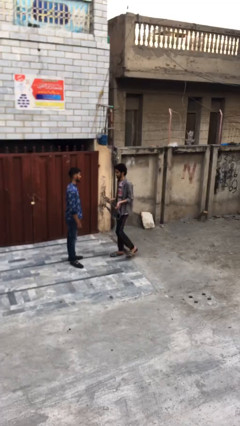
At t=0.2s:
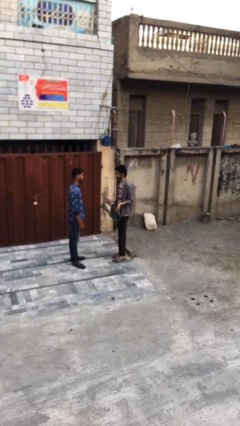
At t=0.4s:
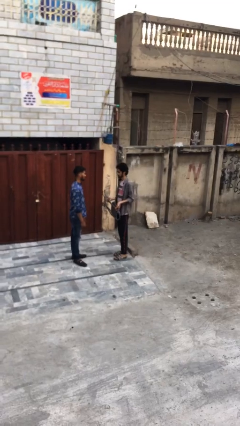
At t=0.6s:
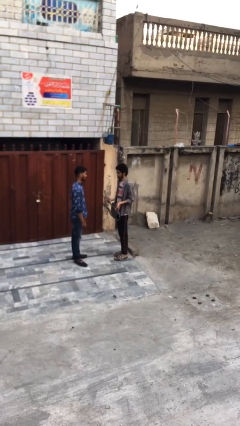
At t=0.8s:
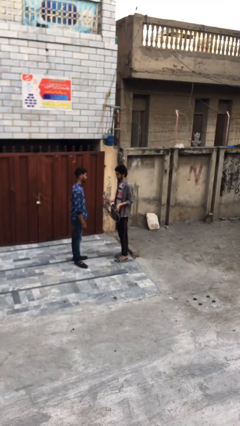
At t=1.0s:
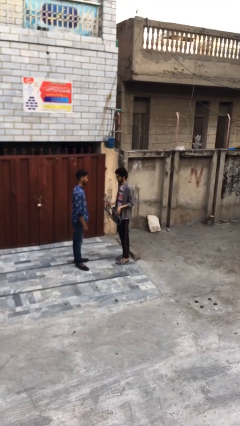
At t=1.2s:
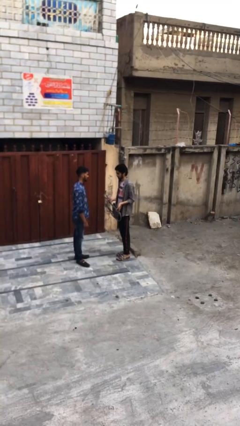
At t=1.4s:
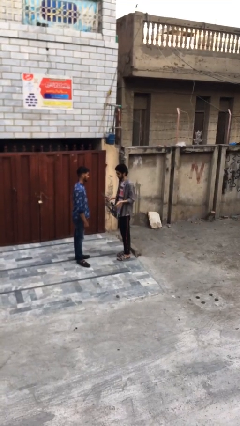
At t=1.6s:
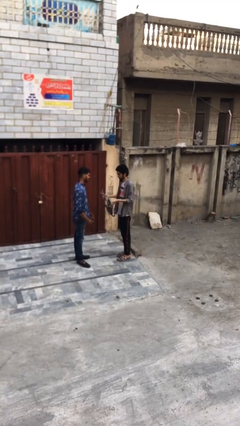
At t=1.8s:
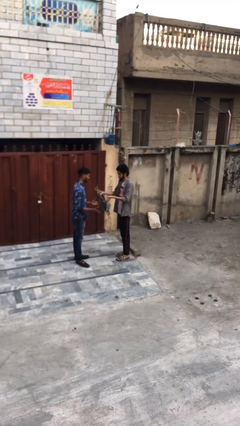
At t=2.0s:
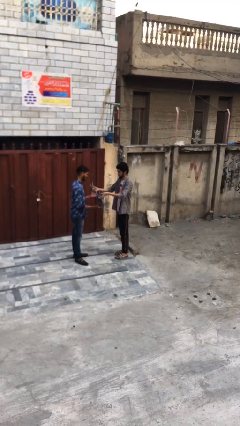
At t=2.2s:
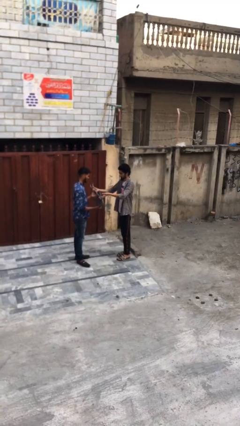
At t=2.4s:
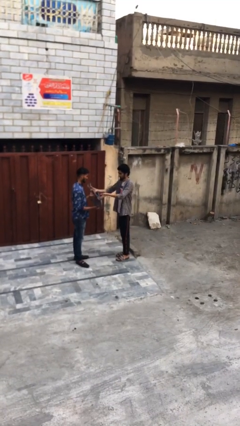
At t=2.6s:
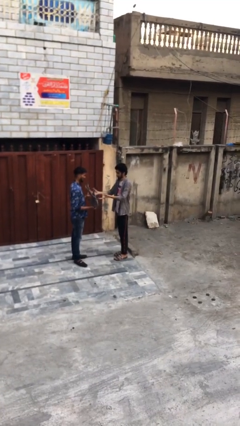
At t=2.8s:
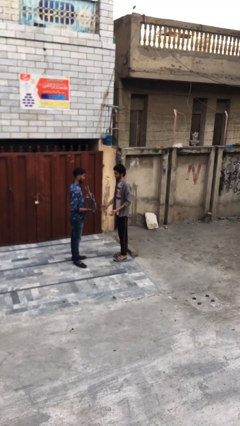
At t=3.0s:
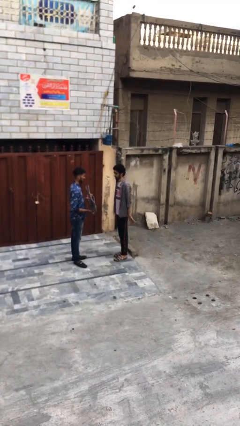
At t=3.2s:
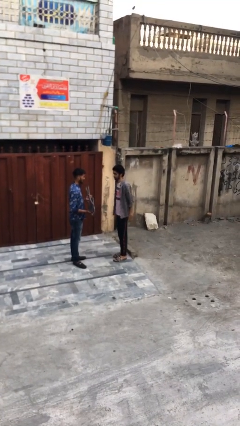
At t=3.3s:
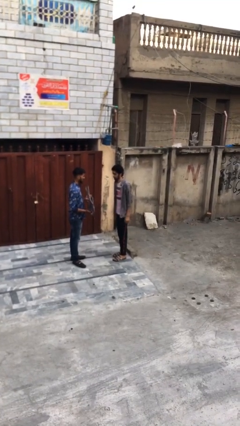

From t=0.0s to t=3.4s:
person transfers object to person

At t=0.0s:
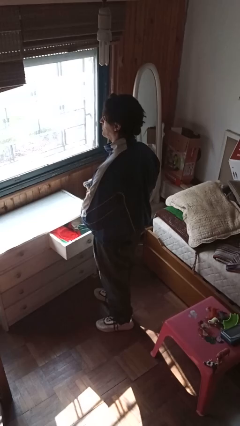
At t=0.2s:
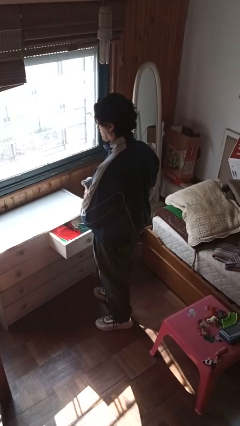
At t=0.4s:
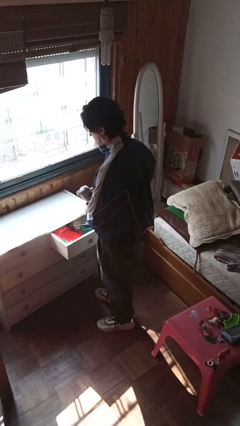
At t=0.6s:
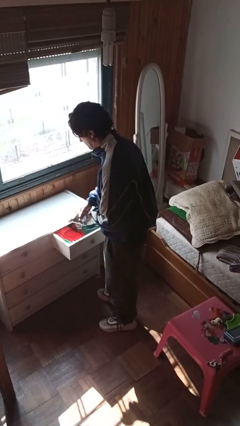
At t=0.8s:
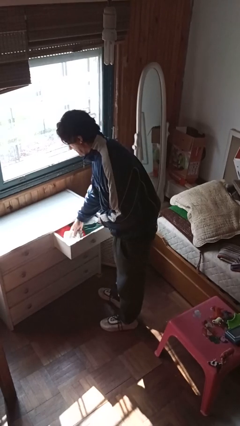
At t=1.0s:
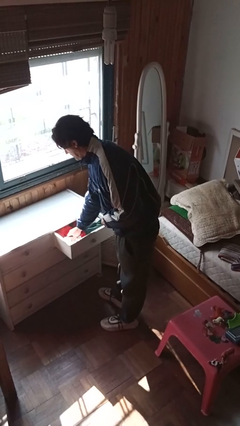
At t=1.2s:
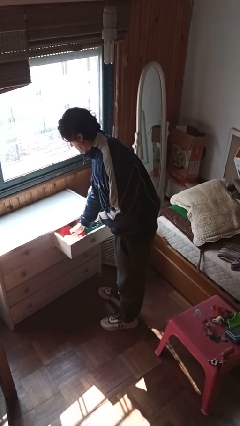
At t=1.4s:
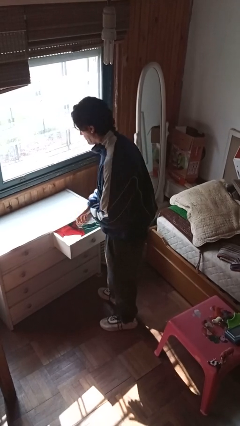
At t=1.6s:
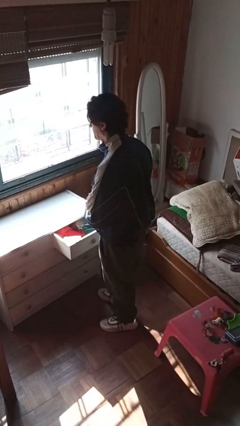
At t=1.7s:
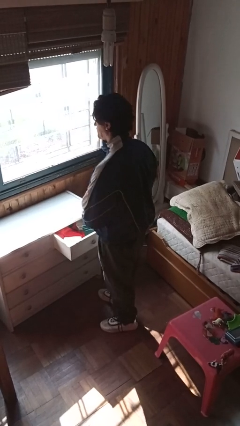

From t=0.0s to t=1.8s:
person puts clothes into dresser

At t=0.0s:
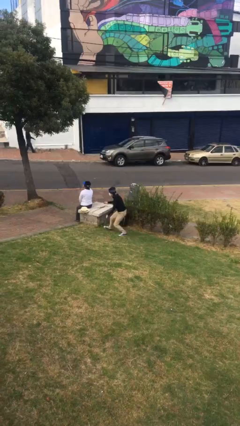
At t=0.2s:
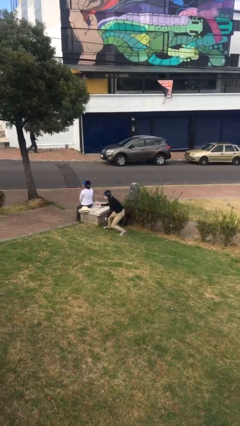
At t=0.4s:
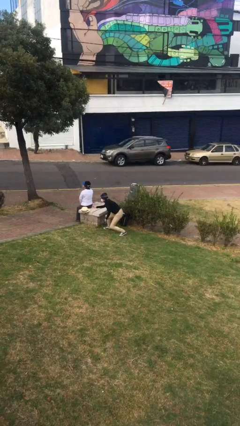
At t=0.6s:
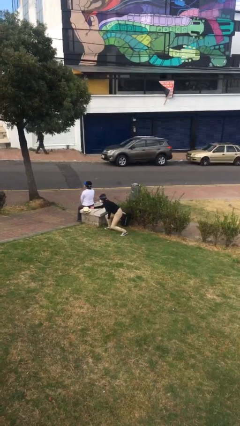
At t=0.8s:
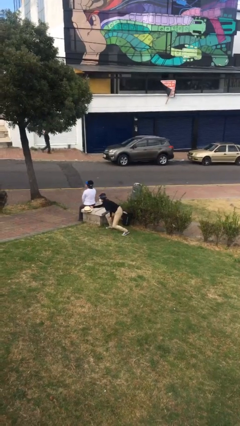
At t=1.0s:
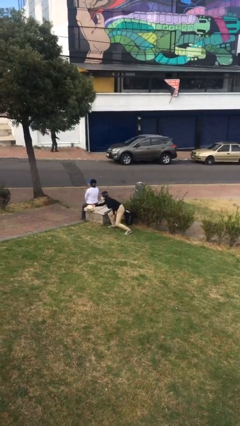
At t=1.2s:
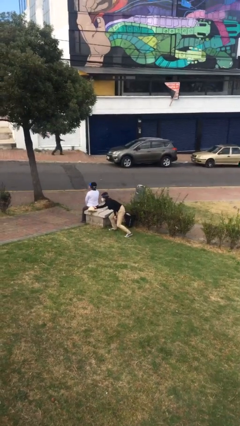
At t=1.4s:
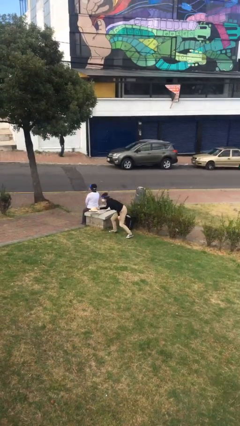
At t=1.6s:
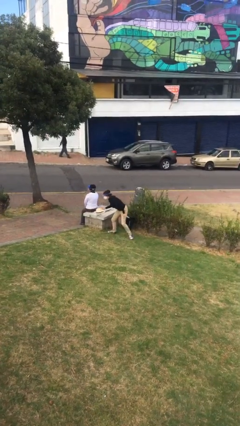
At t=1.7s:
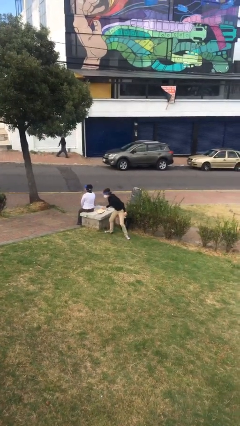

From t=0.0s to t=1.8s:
person steals object from person

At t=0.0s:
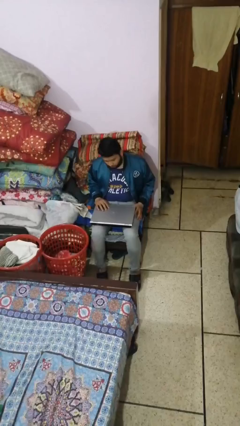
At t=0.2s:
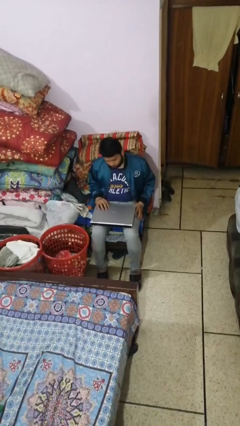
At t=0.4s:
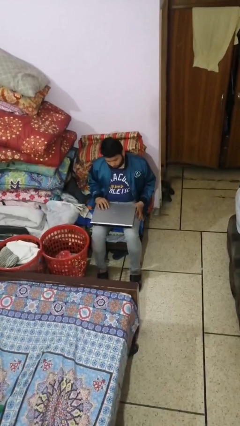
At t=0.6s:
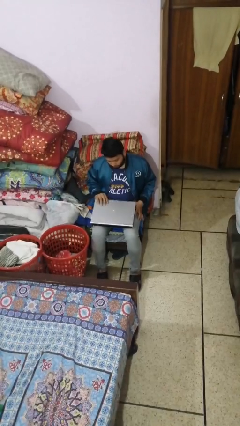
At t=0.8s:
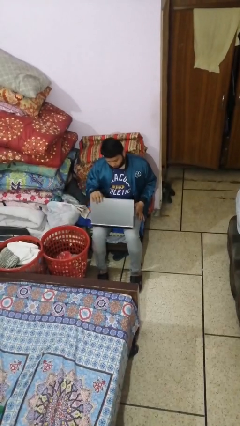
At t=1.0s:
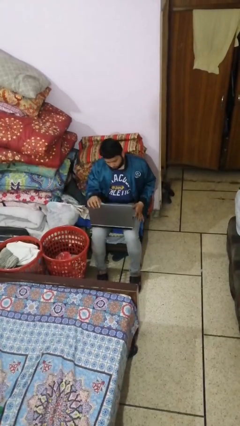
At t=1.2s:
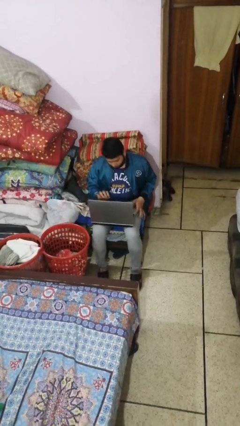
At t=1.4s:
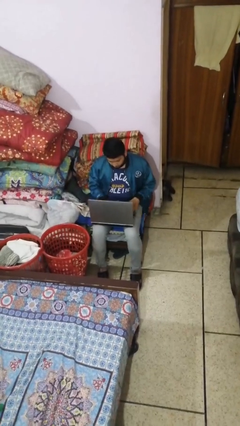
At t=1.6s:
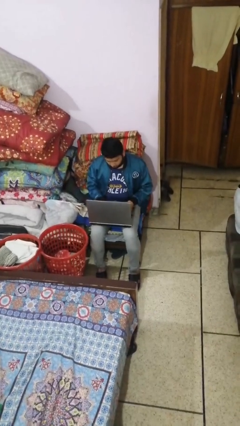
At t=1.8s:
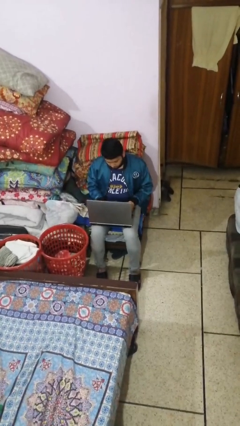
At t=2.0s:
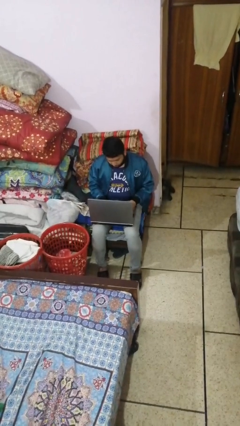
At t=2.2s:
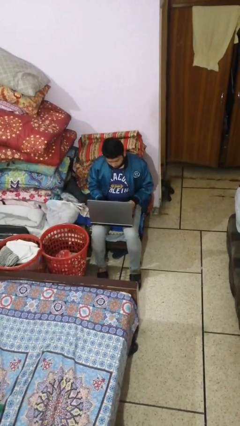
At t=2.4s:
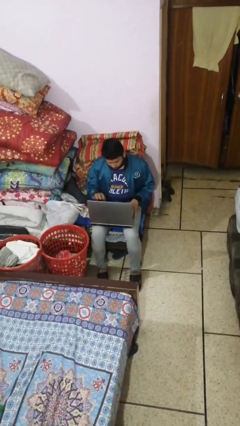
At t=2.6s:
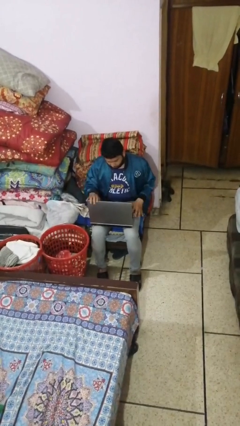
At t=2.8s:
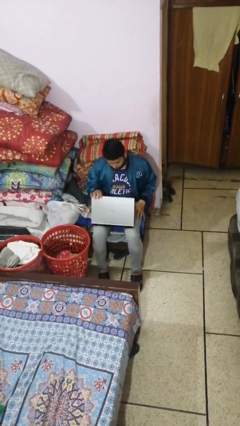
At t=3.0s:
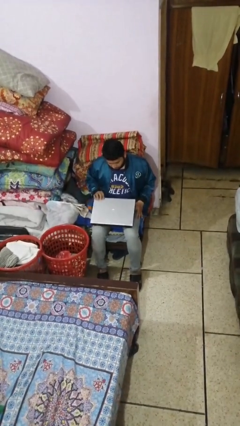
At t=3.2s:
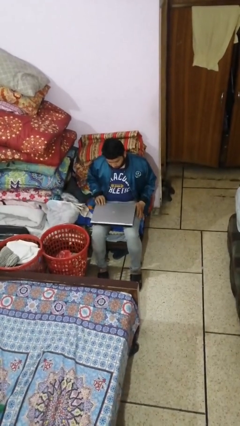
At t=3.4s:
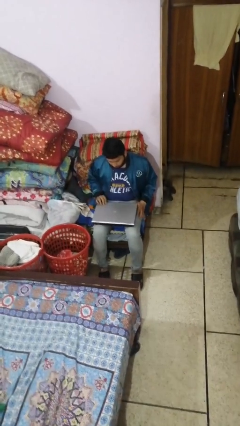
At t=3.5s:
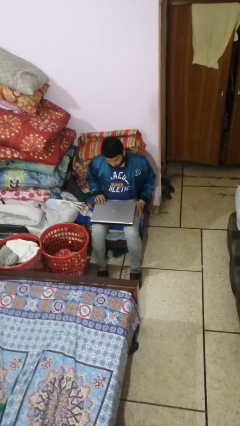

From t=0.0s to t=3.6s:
person interacts with laptop

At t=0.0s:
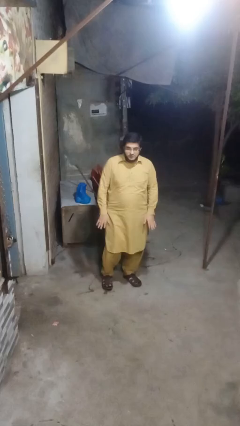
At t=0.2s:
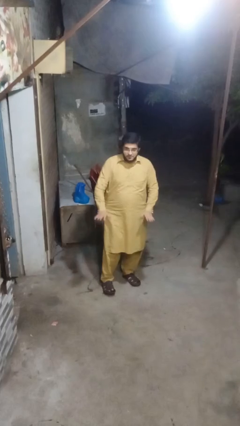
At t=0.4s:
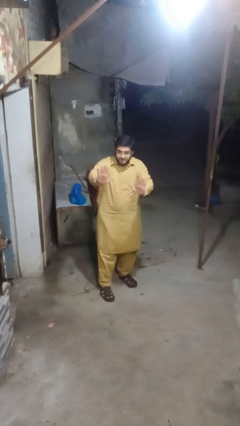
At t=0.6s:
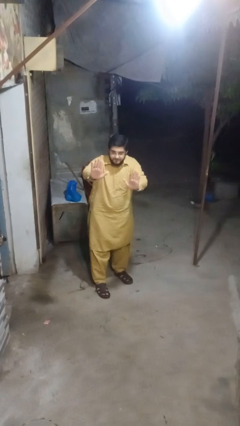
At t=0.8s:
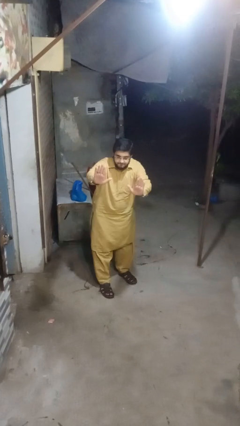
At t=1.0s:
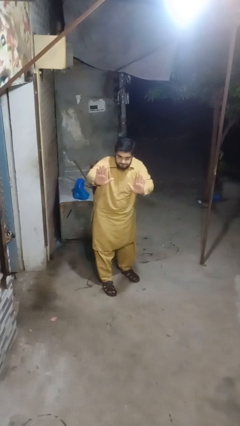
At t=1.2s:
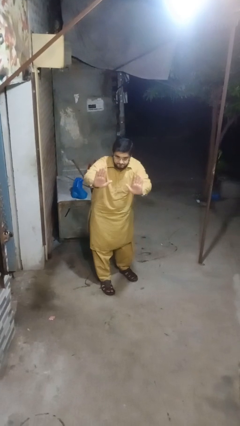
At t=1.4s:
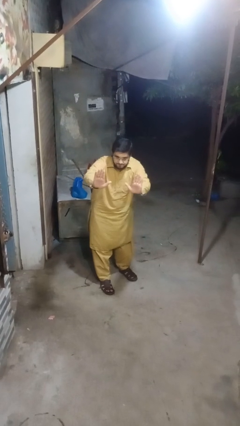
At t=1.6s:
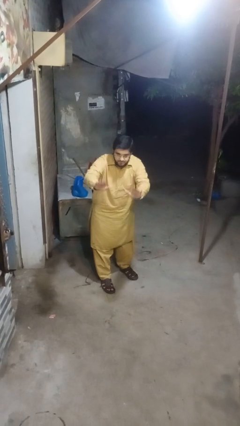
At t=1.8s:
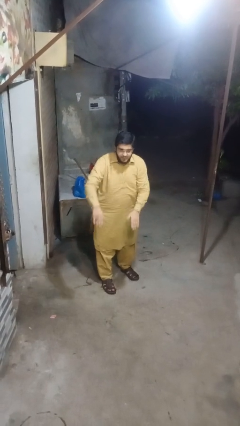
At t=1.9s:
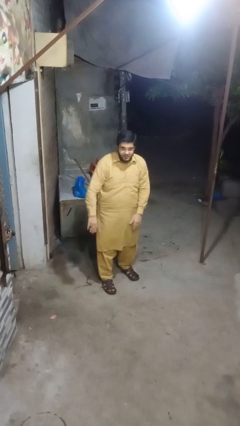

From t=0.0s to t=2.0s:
person gestures stop

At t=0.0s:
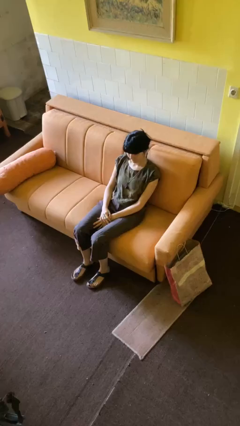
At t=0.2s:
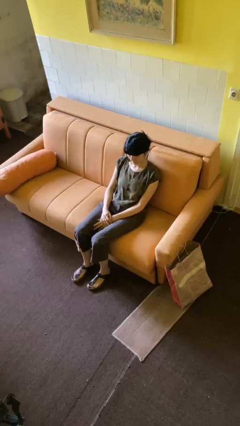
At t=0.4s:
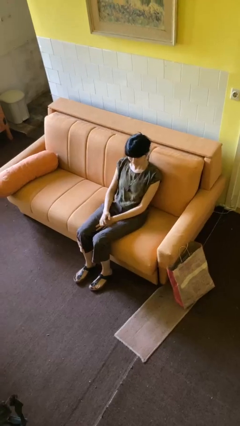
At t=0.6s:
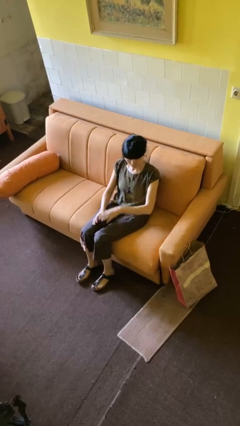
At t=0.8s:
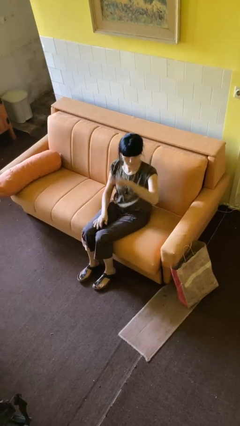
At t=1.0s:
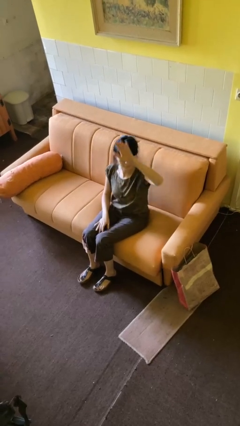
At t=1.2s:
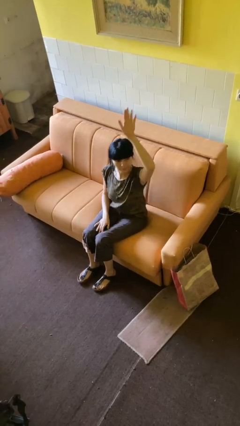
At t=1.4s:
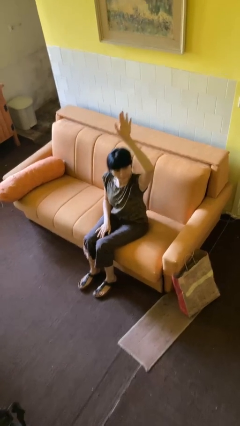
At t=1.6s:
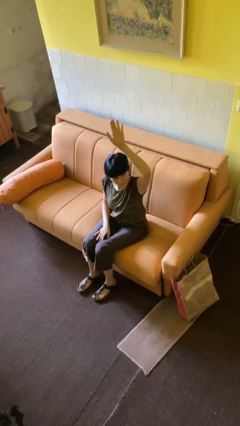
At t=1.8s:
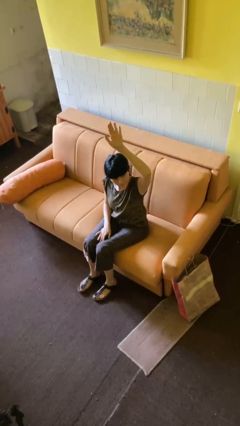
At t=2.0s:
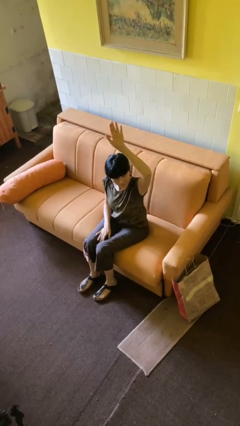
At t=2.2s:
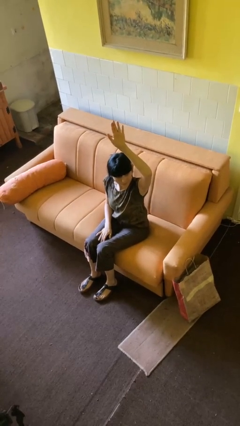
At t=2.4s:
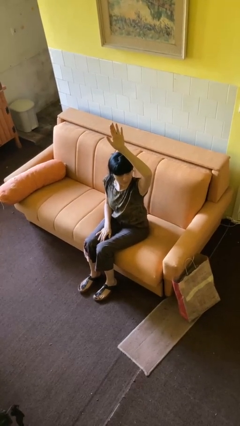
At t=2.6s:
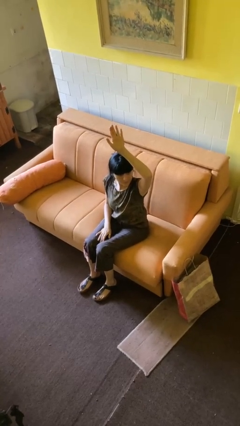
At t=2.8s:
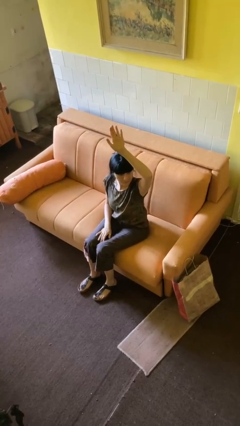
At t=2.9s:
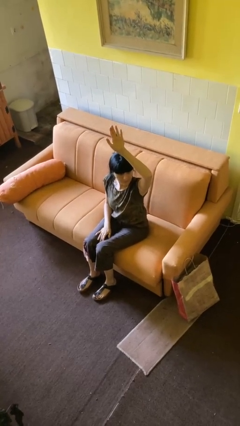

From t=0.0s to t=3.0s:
person gestures raise hand

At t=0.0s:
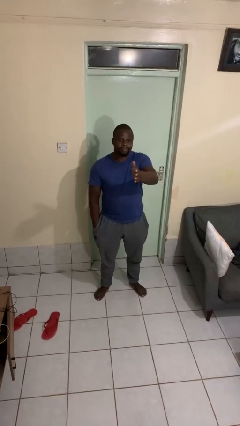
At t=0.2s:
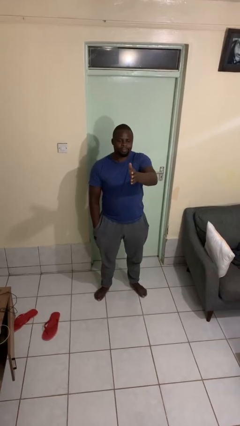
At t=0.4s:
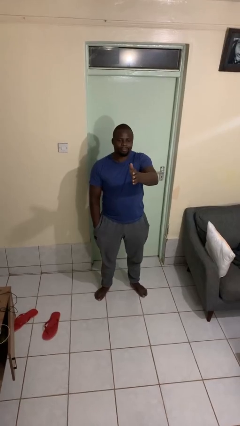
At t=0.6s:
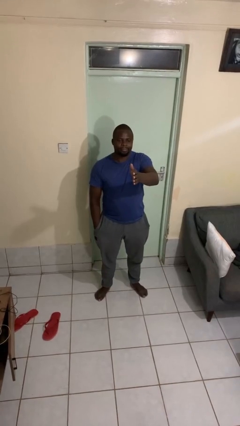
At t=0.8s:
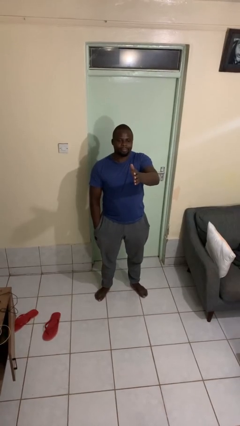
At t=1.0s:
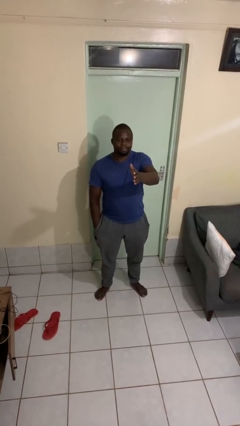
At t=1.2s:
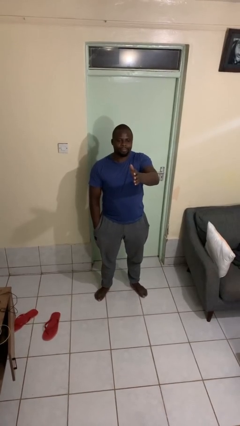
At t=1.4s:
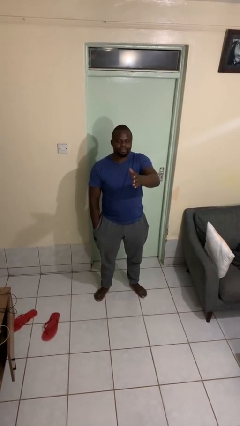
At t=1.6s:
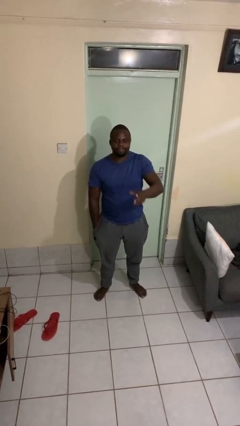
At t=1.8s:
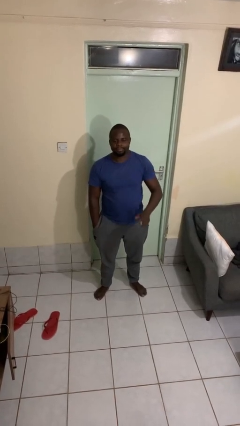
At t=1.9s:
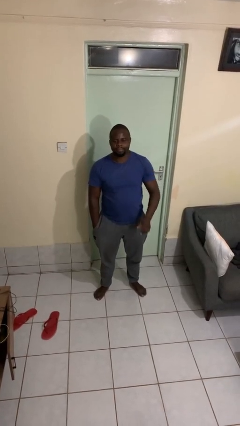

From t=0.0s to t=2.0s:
person gestures swipe right
